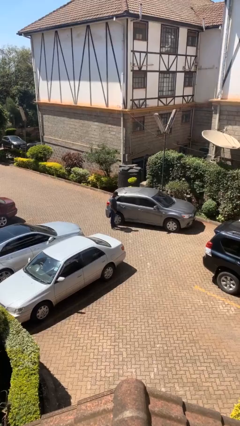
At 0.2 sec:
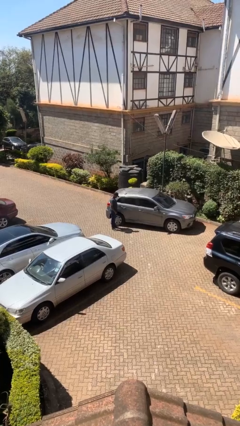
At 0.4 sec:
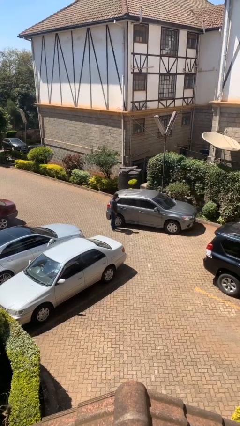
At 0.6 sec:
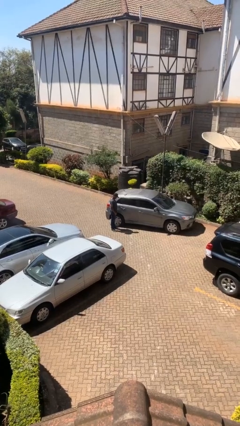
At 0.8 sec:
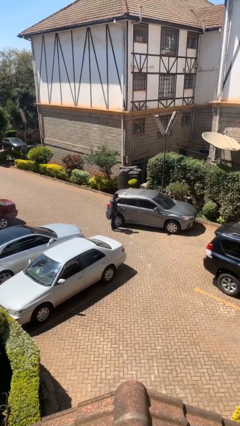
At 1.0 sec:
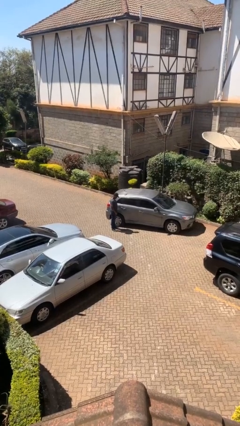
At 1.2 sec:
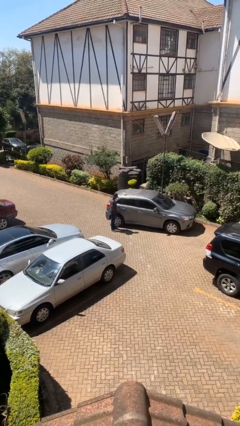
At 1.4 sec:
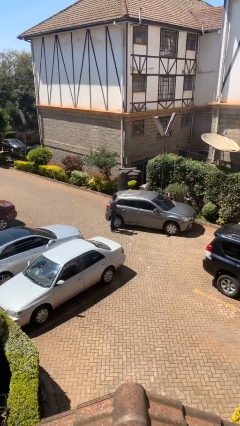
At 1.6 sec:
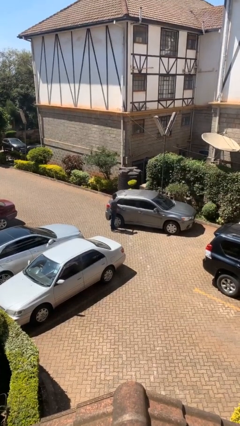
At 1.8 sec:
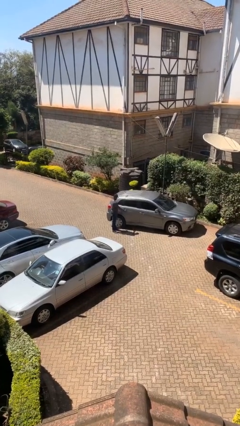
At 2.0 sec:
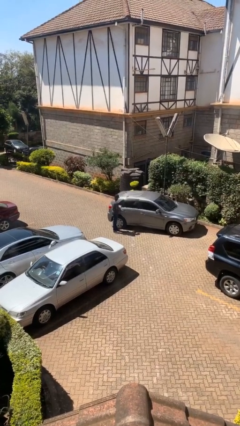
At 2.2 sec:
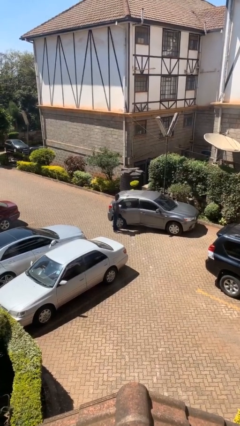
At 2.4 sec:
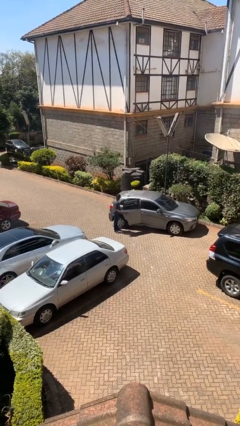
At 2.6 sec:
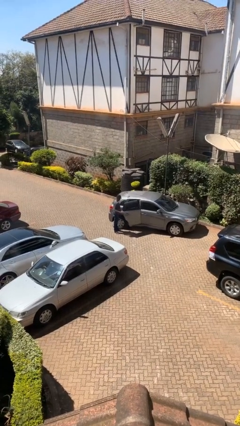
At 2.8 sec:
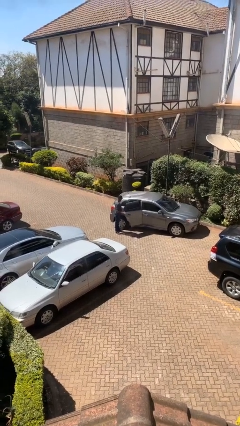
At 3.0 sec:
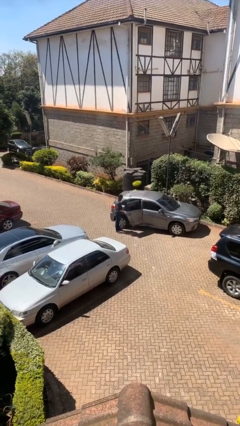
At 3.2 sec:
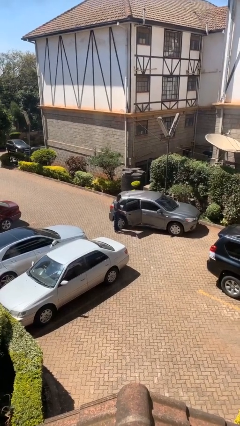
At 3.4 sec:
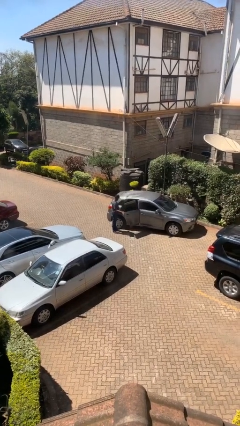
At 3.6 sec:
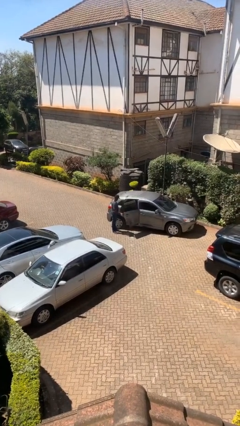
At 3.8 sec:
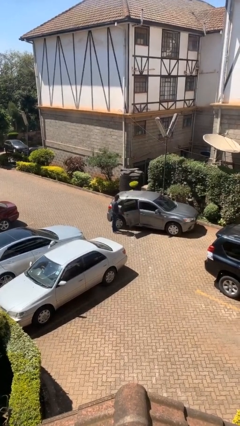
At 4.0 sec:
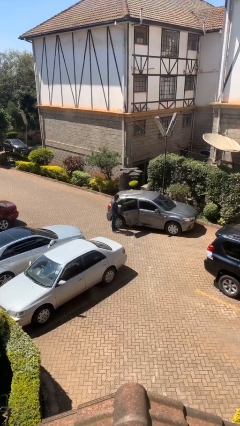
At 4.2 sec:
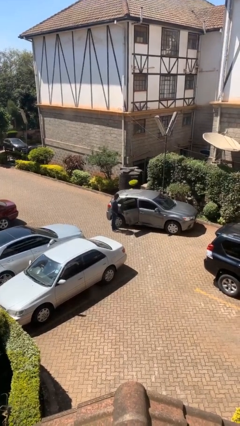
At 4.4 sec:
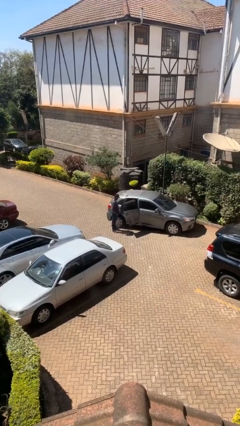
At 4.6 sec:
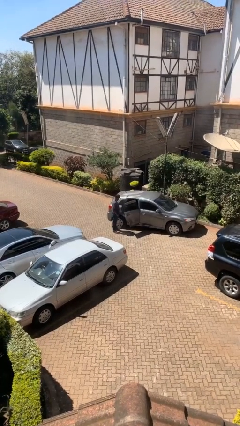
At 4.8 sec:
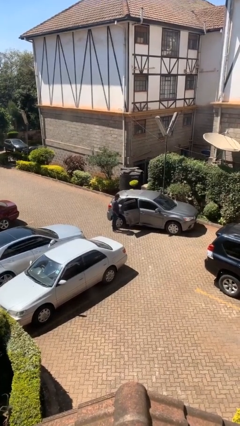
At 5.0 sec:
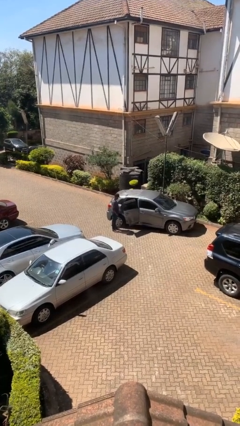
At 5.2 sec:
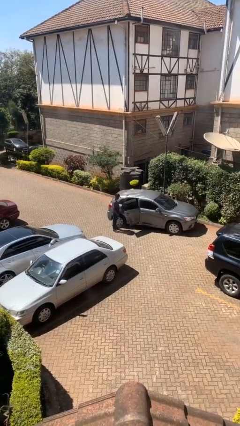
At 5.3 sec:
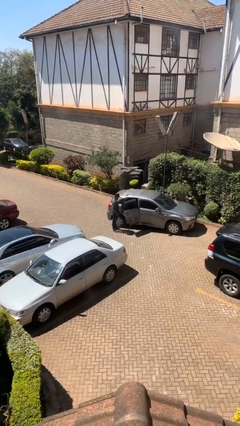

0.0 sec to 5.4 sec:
person opens car door

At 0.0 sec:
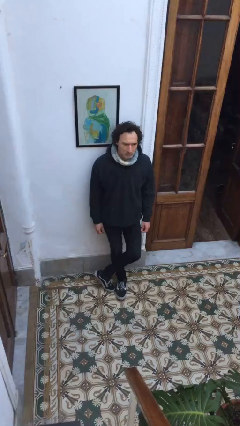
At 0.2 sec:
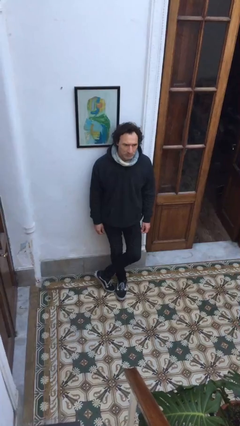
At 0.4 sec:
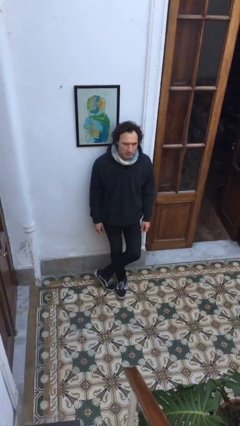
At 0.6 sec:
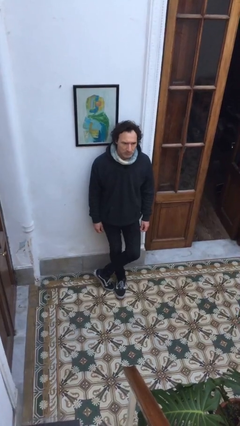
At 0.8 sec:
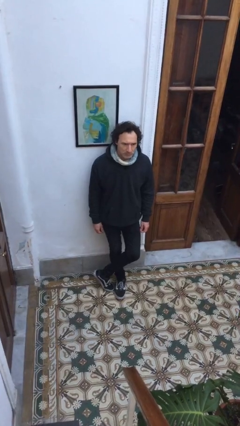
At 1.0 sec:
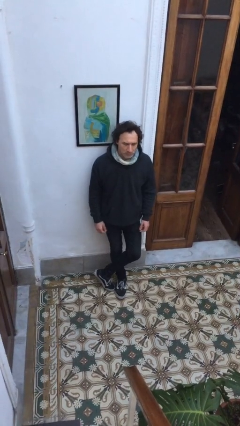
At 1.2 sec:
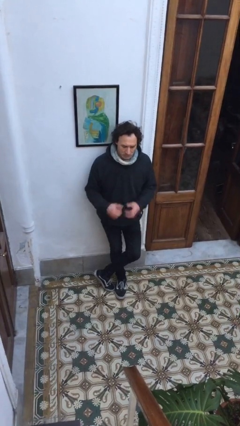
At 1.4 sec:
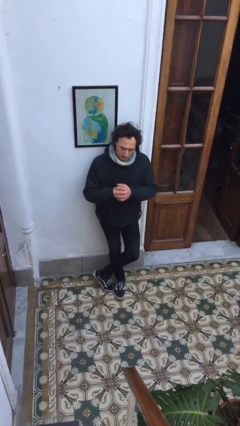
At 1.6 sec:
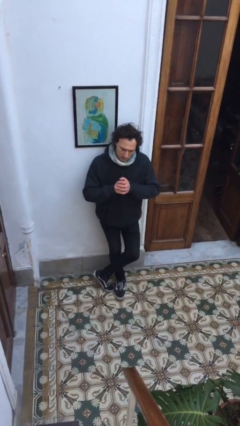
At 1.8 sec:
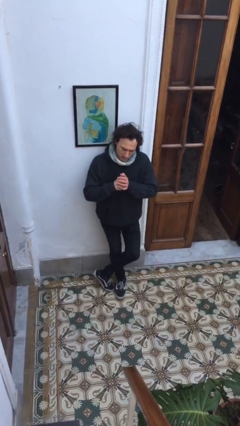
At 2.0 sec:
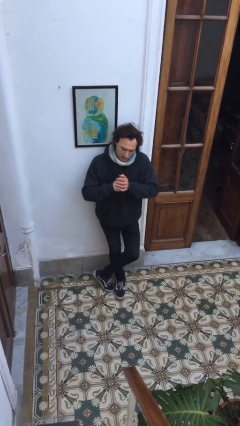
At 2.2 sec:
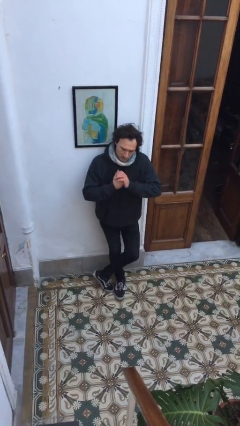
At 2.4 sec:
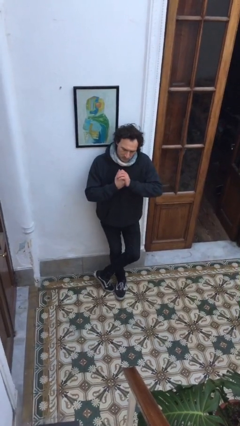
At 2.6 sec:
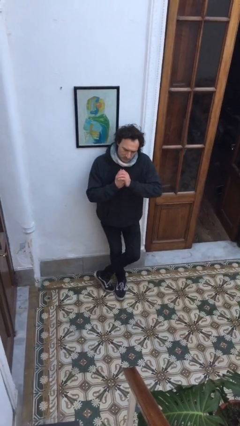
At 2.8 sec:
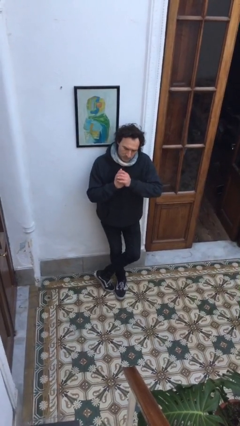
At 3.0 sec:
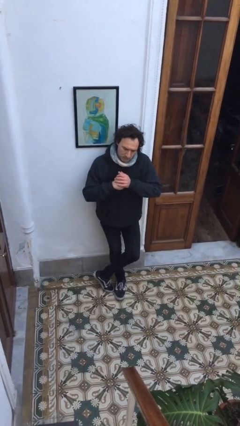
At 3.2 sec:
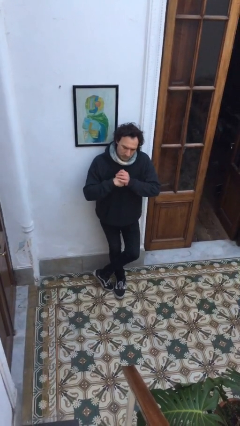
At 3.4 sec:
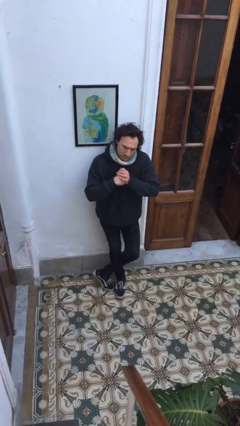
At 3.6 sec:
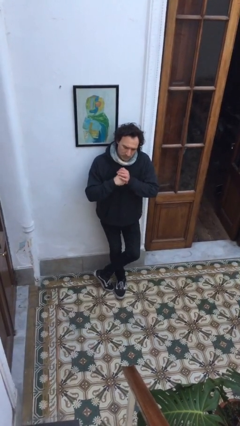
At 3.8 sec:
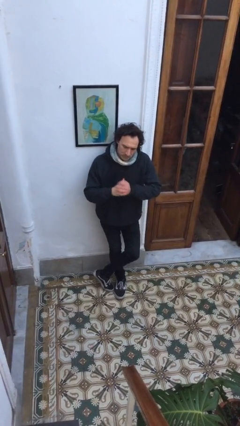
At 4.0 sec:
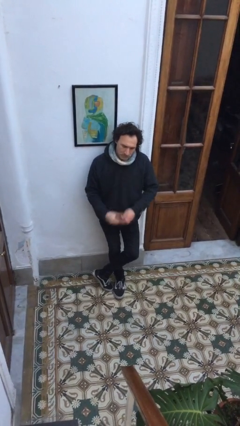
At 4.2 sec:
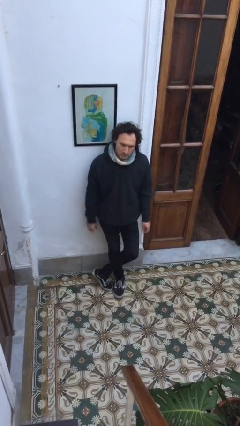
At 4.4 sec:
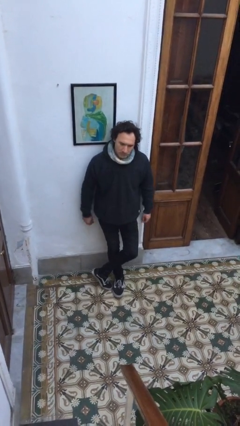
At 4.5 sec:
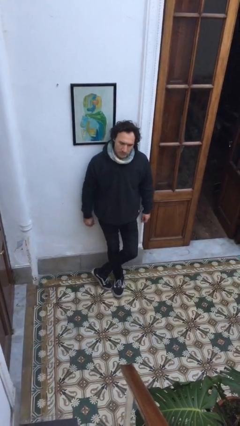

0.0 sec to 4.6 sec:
person cracks knuckles

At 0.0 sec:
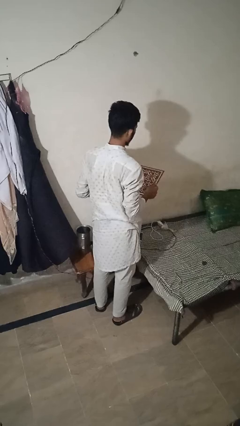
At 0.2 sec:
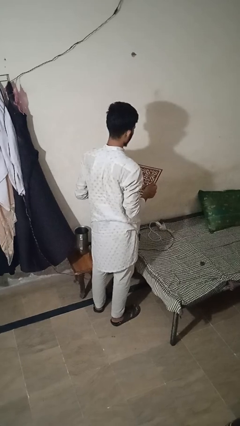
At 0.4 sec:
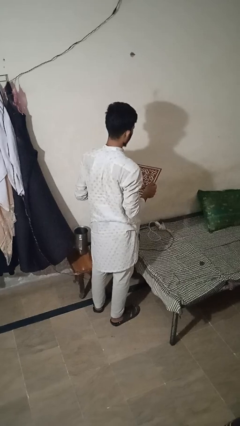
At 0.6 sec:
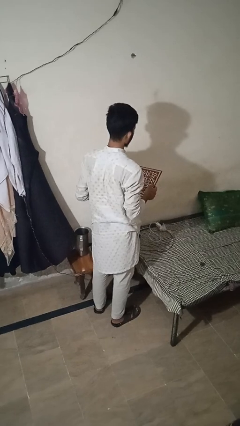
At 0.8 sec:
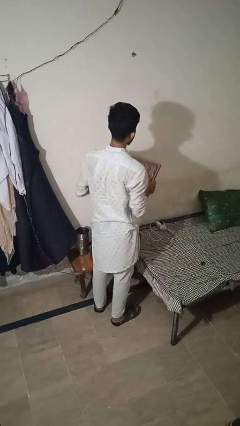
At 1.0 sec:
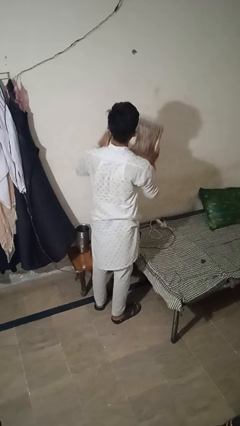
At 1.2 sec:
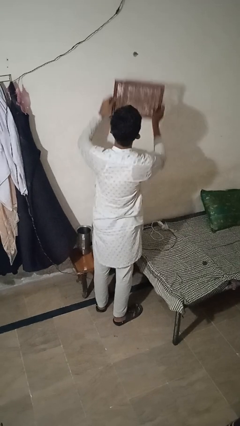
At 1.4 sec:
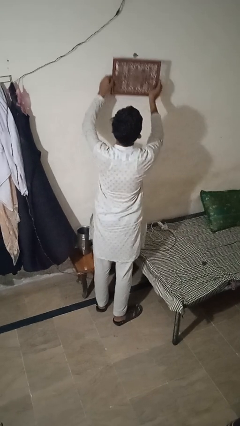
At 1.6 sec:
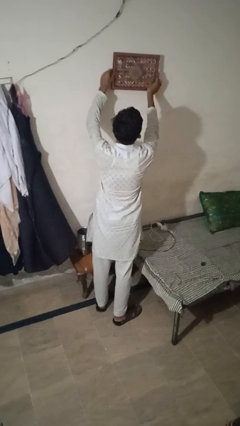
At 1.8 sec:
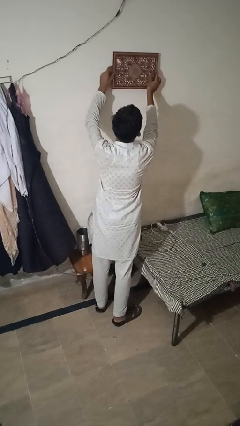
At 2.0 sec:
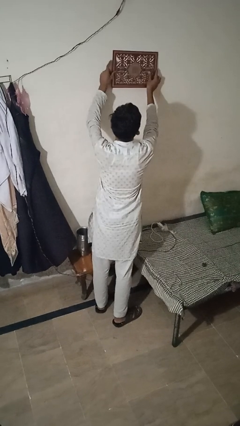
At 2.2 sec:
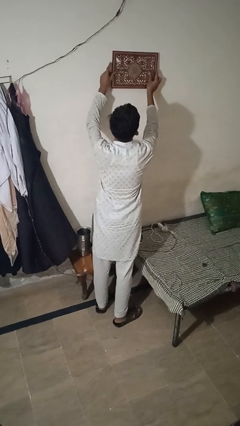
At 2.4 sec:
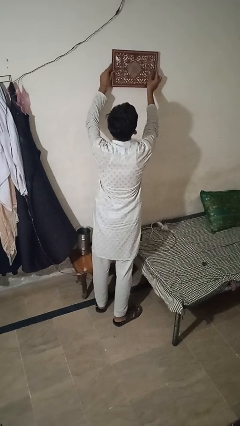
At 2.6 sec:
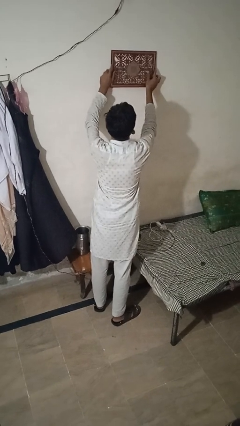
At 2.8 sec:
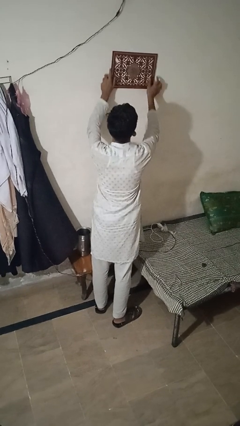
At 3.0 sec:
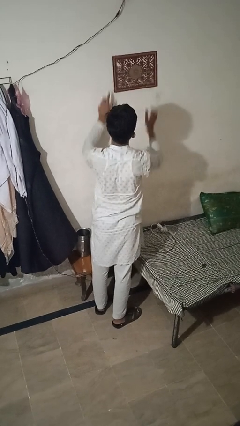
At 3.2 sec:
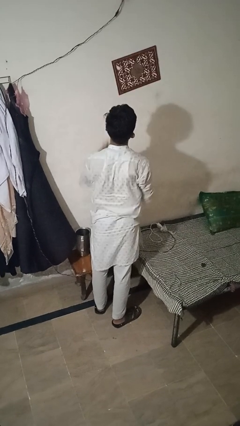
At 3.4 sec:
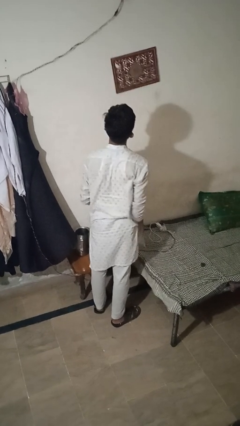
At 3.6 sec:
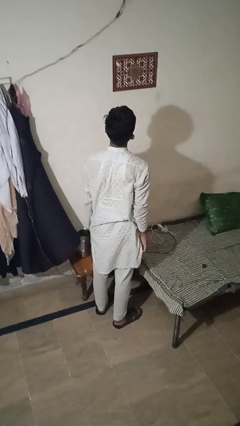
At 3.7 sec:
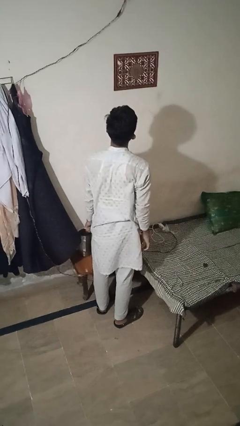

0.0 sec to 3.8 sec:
person puts up picture frame

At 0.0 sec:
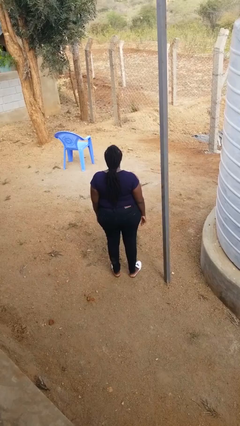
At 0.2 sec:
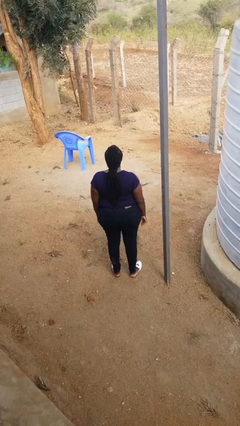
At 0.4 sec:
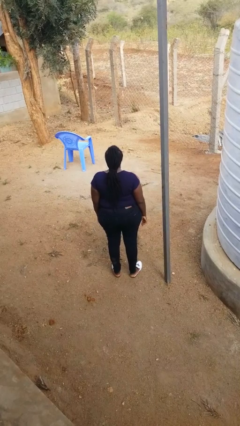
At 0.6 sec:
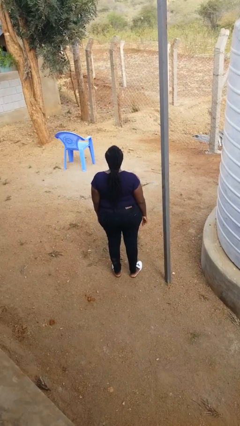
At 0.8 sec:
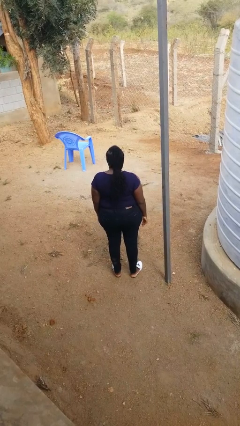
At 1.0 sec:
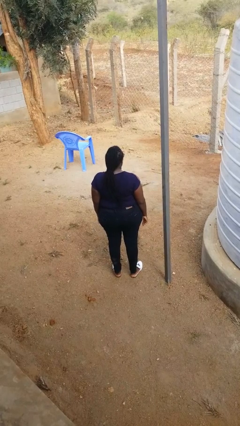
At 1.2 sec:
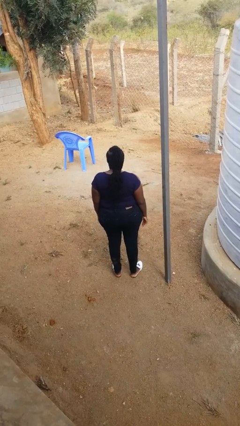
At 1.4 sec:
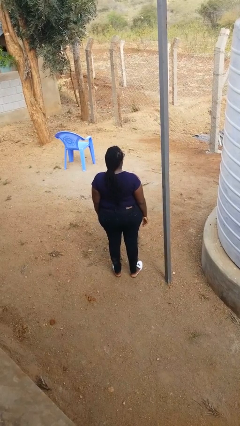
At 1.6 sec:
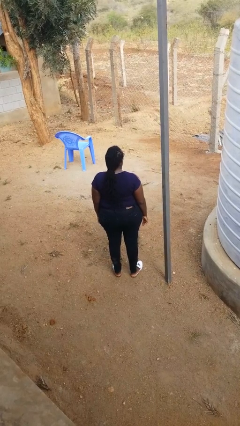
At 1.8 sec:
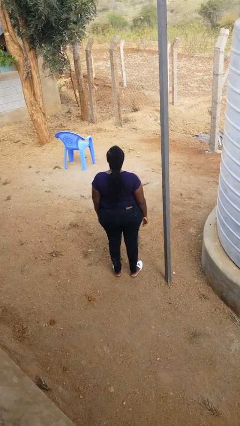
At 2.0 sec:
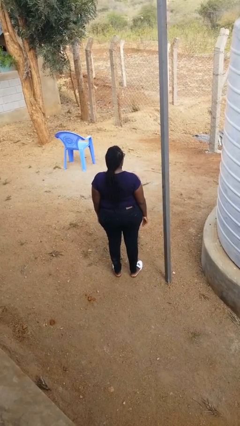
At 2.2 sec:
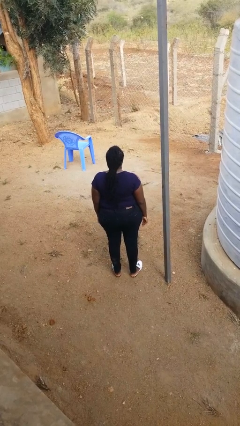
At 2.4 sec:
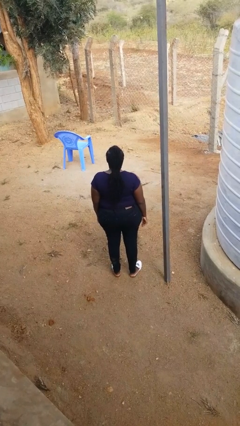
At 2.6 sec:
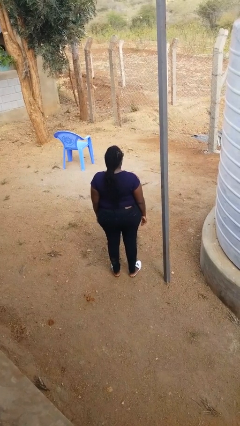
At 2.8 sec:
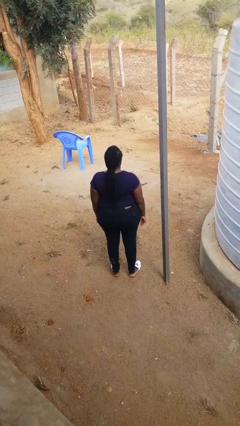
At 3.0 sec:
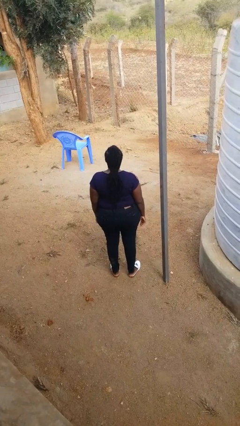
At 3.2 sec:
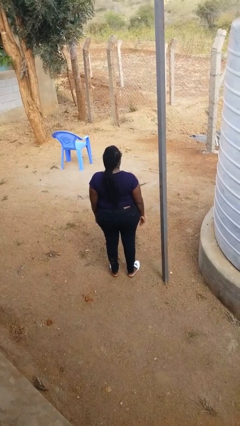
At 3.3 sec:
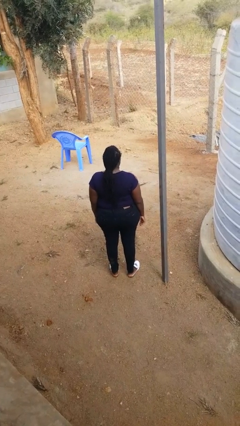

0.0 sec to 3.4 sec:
person shakes head

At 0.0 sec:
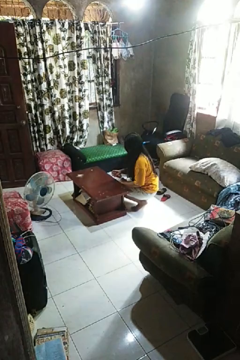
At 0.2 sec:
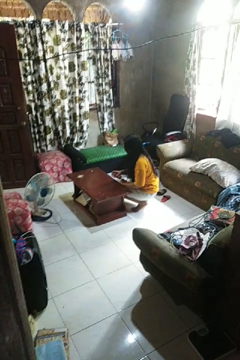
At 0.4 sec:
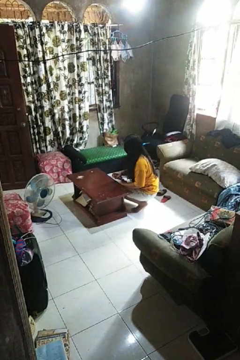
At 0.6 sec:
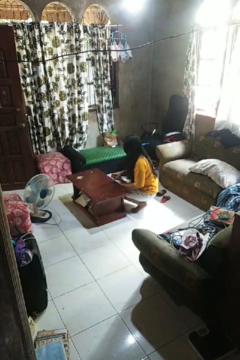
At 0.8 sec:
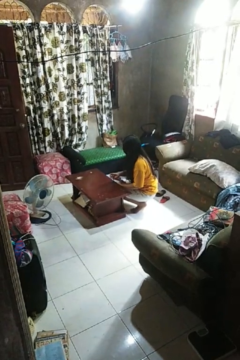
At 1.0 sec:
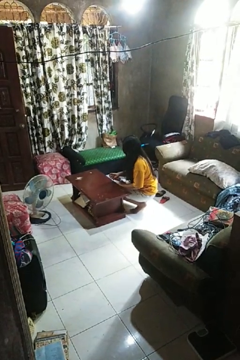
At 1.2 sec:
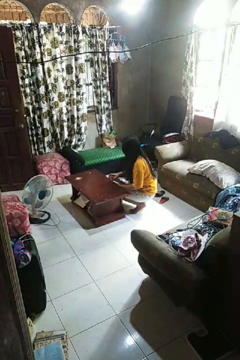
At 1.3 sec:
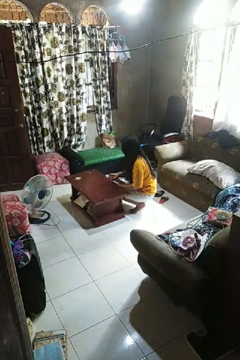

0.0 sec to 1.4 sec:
person sprays from bottle
